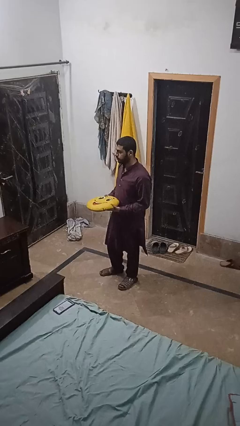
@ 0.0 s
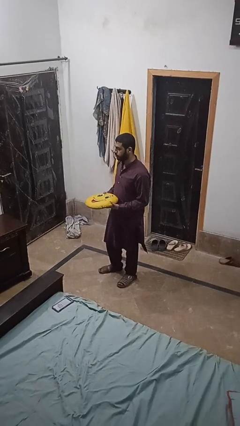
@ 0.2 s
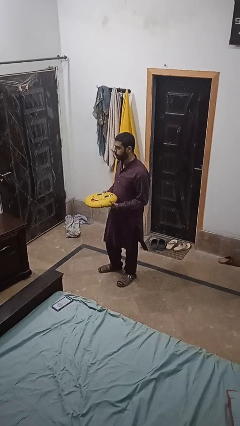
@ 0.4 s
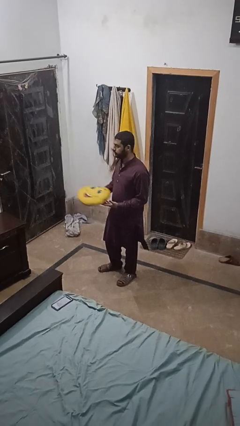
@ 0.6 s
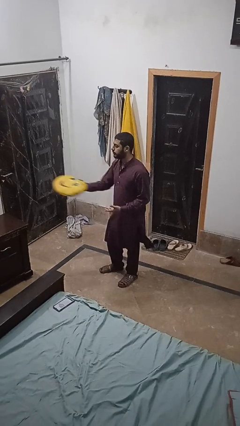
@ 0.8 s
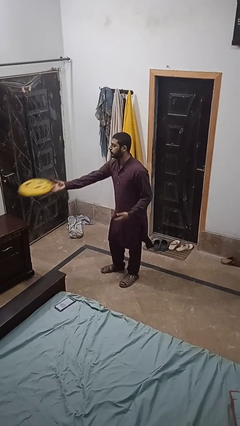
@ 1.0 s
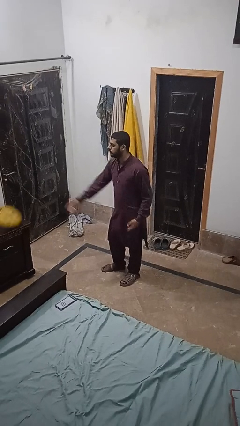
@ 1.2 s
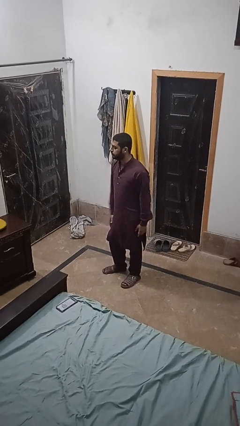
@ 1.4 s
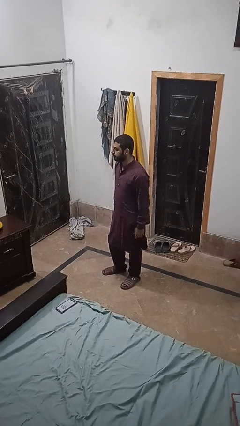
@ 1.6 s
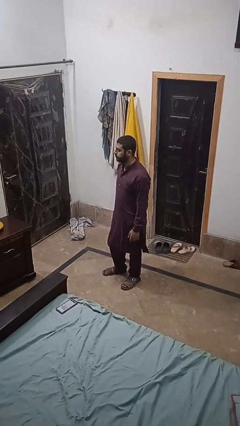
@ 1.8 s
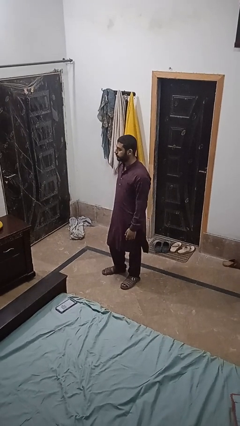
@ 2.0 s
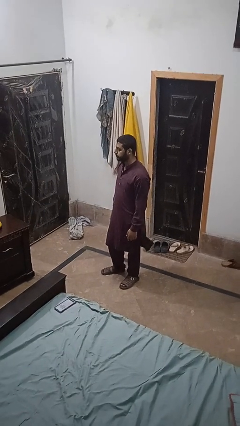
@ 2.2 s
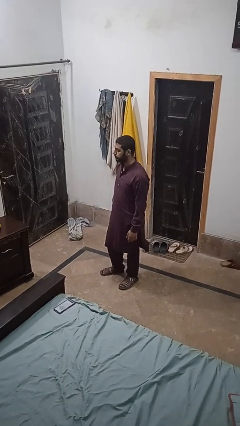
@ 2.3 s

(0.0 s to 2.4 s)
person throws object on table

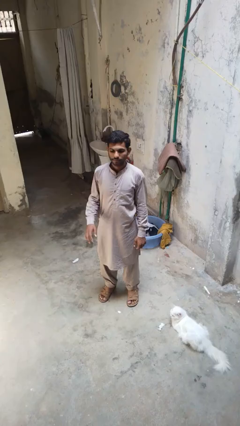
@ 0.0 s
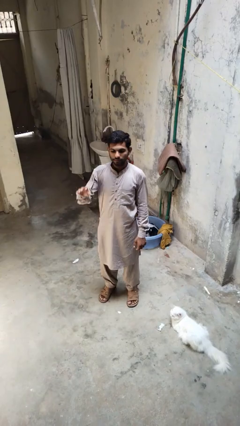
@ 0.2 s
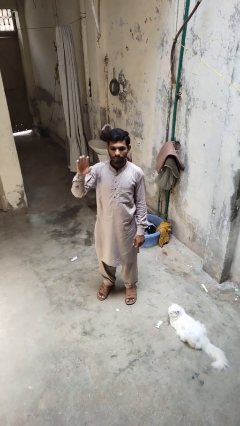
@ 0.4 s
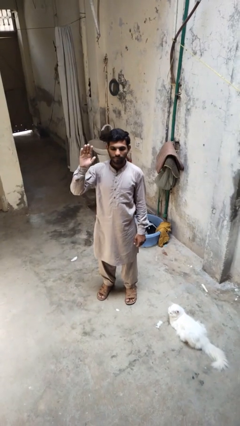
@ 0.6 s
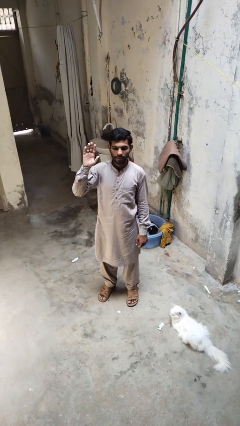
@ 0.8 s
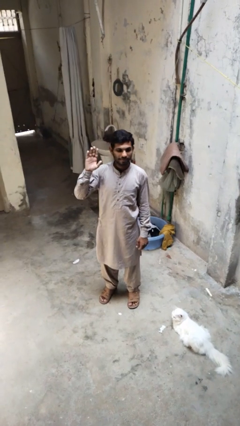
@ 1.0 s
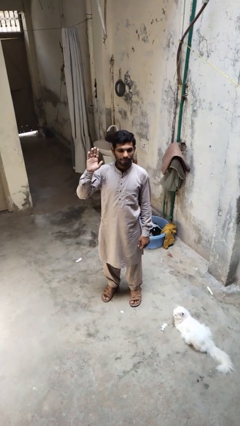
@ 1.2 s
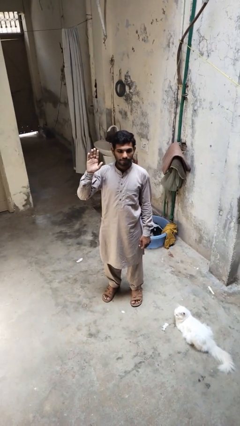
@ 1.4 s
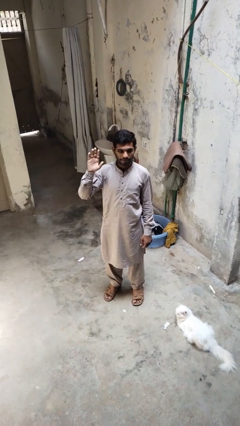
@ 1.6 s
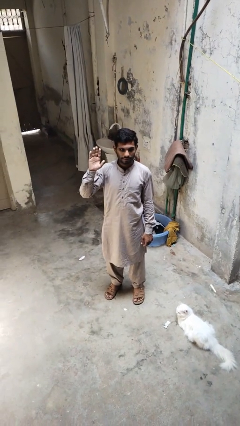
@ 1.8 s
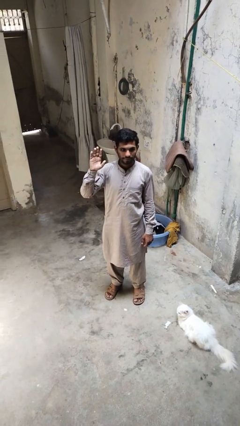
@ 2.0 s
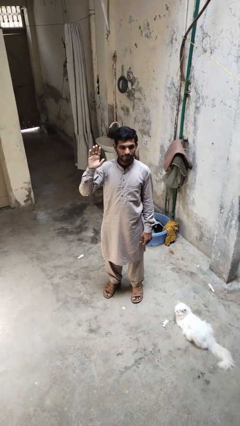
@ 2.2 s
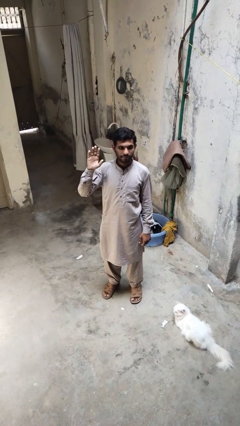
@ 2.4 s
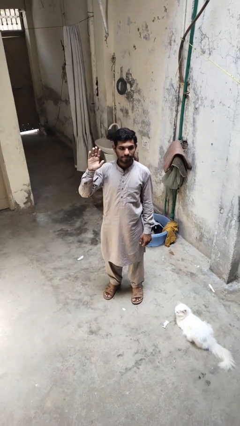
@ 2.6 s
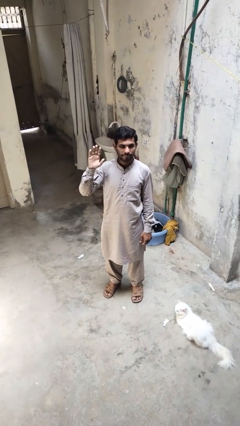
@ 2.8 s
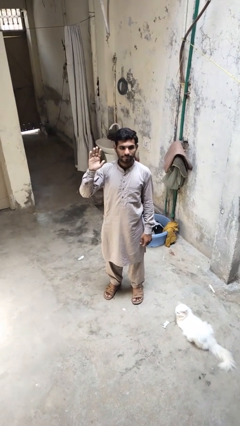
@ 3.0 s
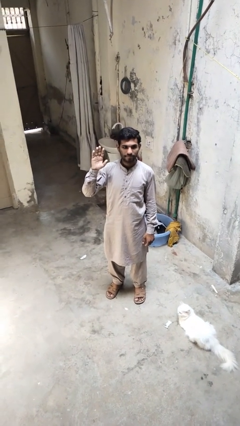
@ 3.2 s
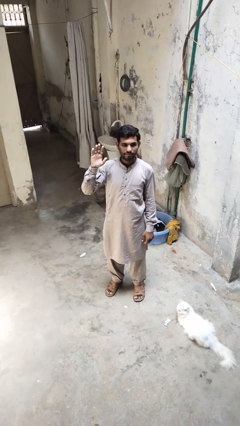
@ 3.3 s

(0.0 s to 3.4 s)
person gestures raise hand

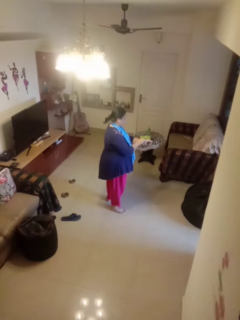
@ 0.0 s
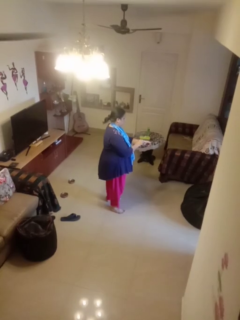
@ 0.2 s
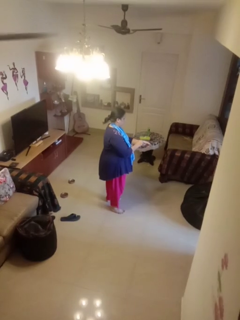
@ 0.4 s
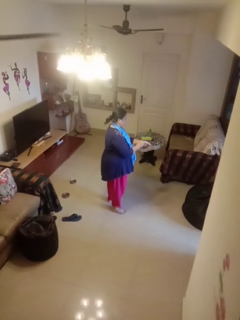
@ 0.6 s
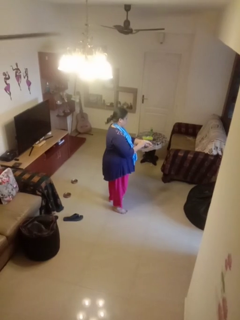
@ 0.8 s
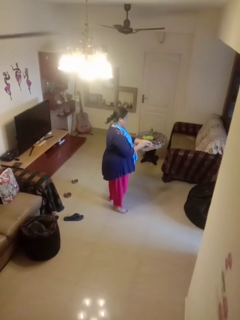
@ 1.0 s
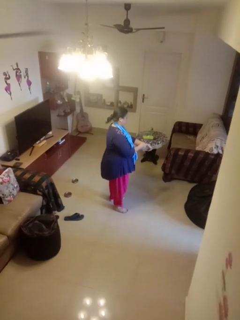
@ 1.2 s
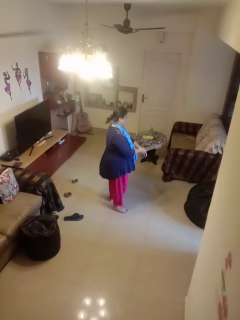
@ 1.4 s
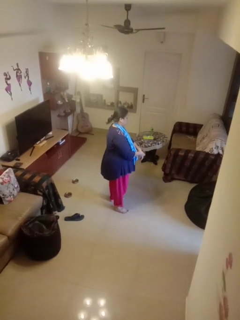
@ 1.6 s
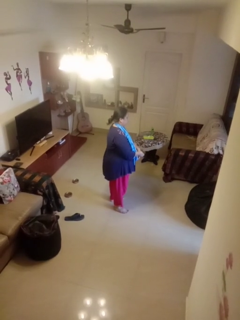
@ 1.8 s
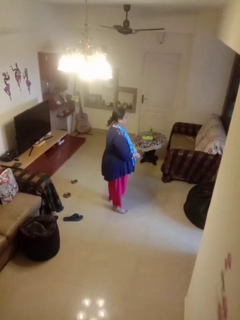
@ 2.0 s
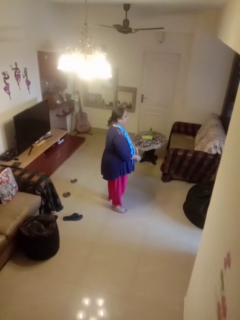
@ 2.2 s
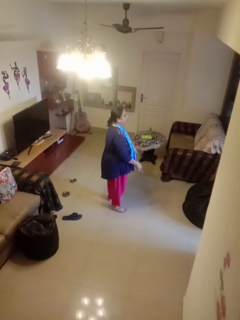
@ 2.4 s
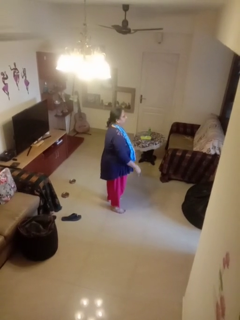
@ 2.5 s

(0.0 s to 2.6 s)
person takes off wristwatch

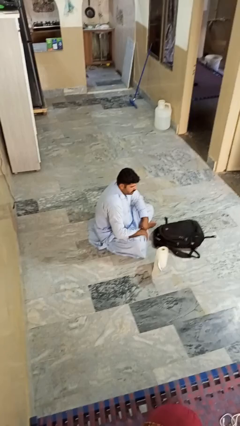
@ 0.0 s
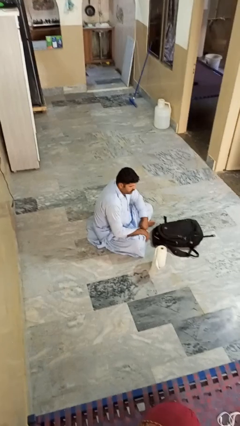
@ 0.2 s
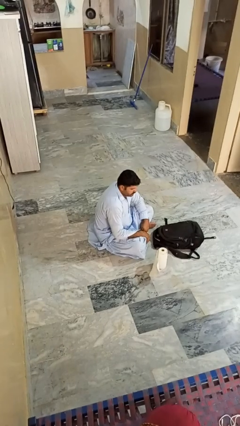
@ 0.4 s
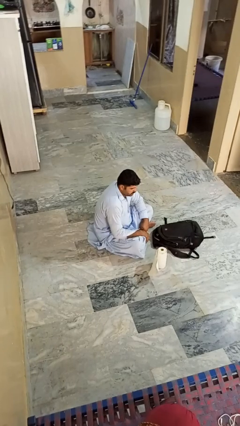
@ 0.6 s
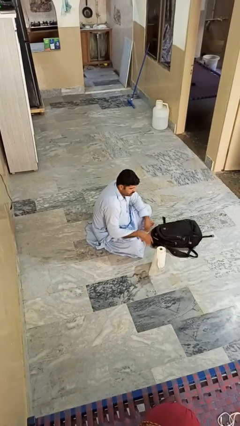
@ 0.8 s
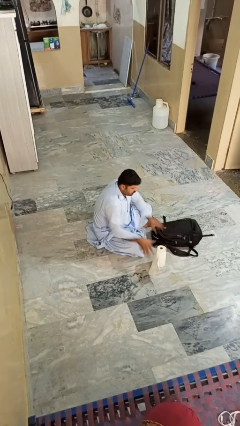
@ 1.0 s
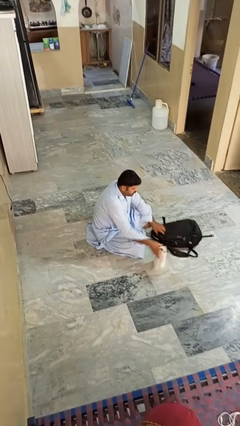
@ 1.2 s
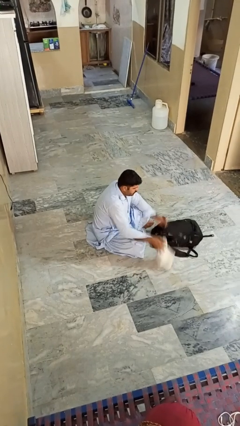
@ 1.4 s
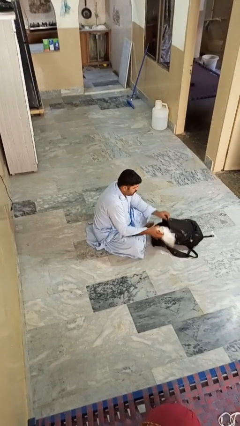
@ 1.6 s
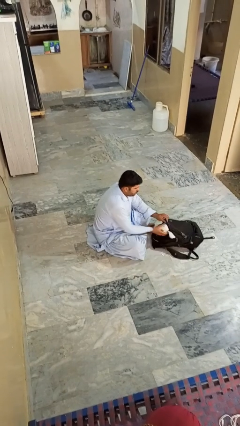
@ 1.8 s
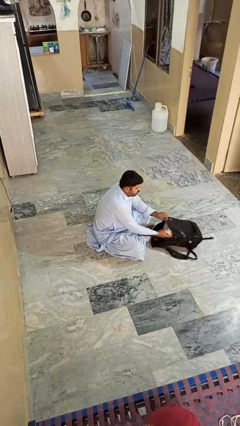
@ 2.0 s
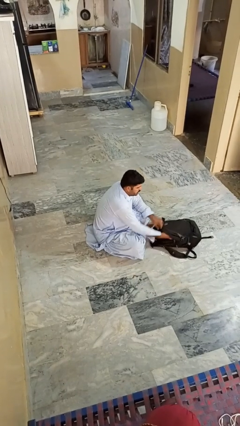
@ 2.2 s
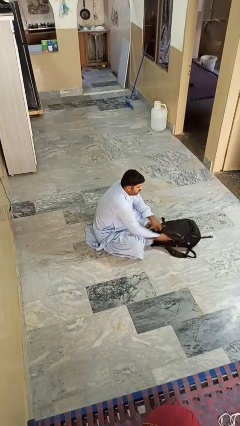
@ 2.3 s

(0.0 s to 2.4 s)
person puts object into bag

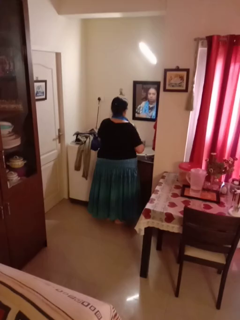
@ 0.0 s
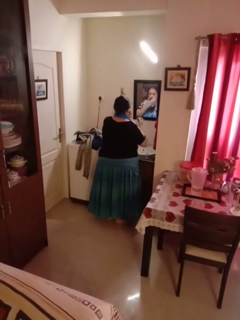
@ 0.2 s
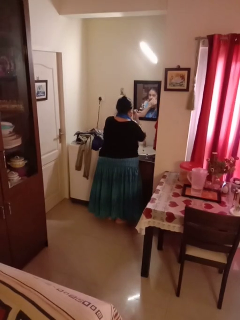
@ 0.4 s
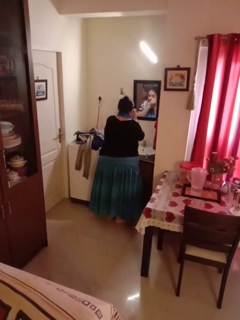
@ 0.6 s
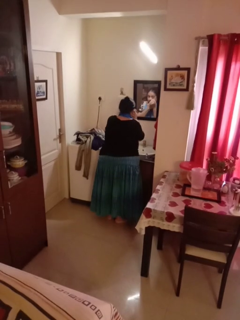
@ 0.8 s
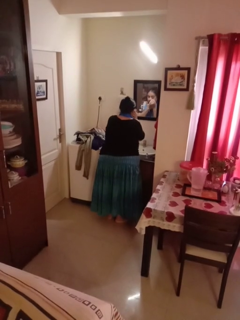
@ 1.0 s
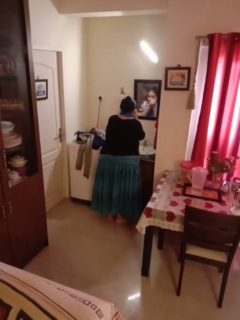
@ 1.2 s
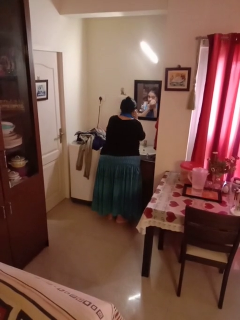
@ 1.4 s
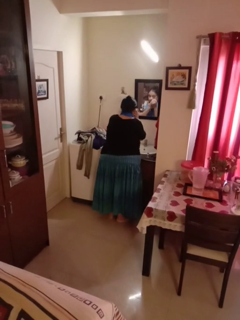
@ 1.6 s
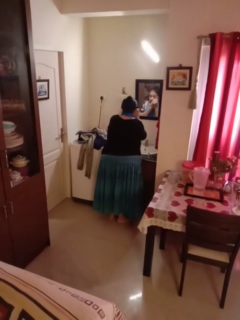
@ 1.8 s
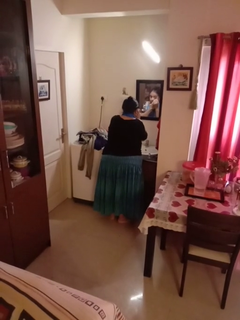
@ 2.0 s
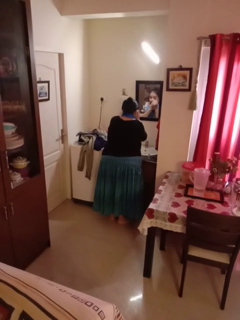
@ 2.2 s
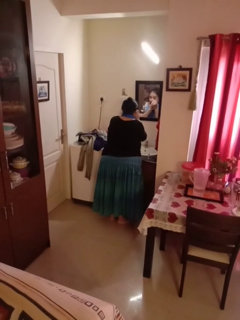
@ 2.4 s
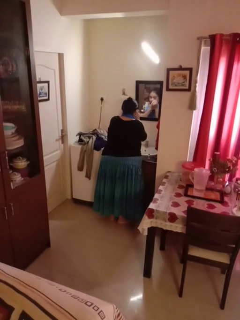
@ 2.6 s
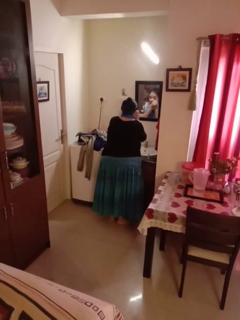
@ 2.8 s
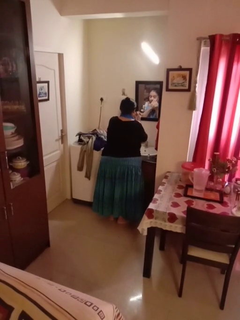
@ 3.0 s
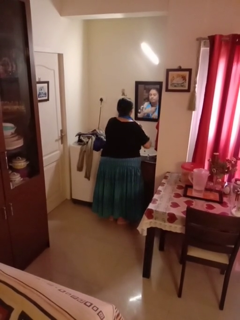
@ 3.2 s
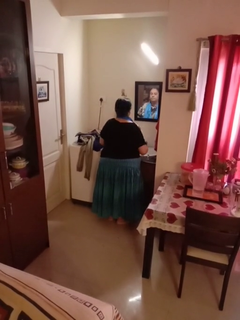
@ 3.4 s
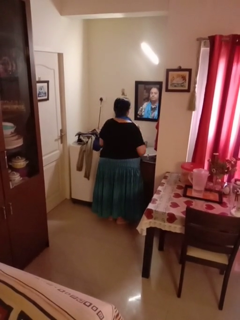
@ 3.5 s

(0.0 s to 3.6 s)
person applies eye makeup

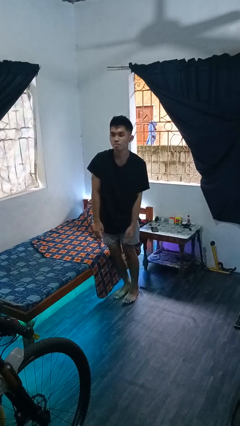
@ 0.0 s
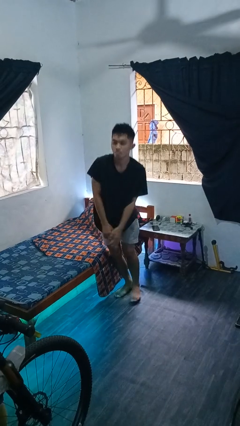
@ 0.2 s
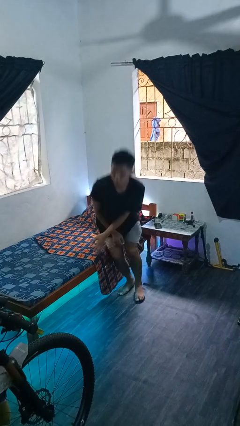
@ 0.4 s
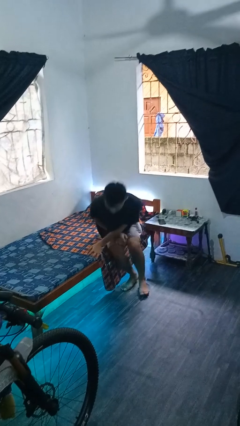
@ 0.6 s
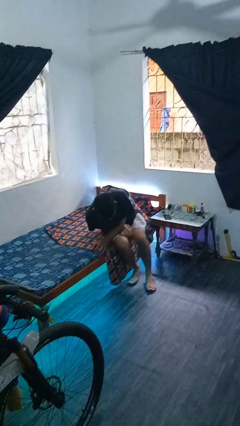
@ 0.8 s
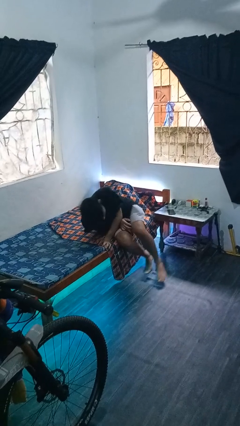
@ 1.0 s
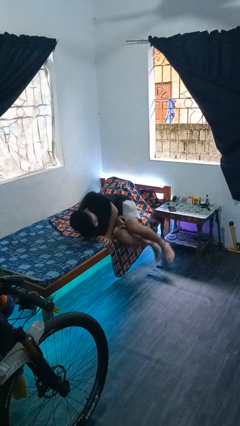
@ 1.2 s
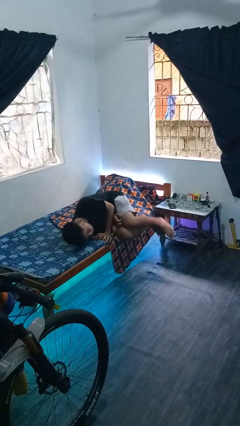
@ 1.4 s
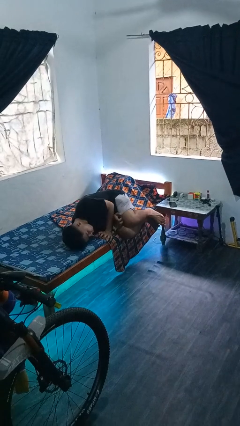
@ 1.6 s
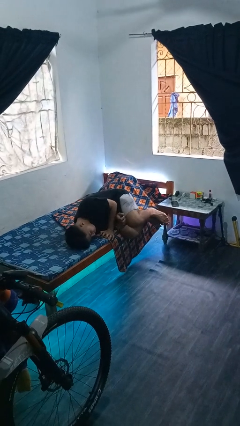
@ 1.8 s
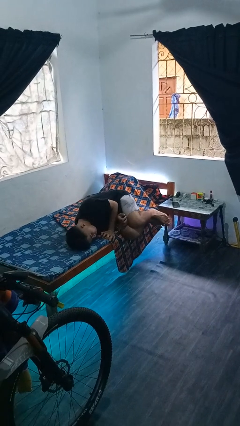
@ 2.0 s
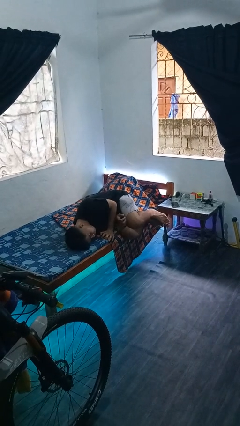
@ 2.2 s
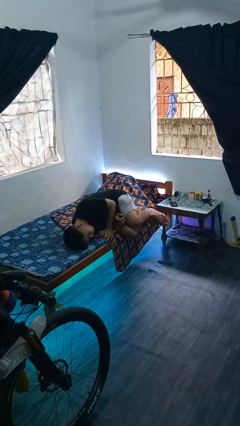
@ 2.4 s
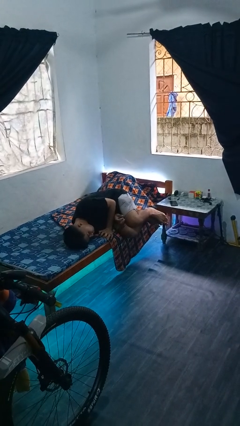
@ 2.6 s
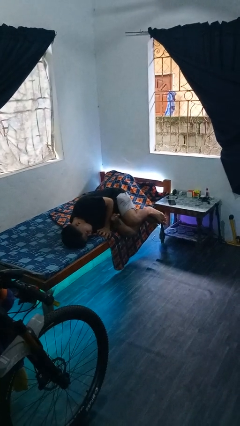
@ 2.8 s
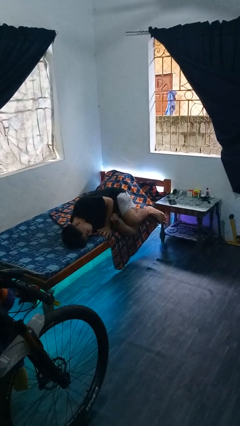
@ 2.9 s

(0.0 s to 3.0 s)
person lies down on bed

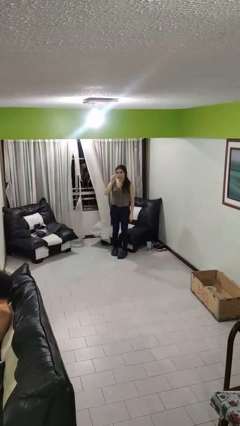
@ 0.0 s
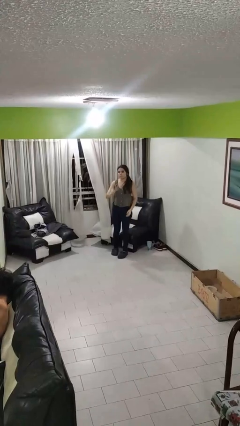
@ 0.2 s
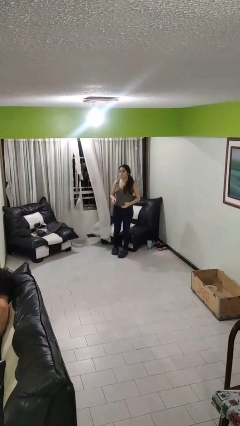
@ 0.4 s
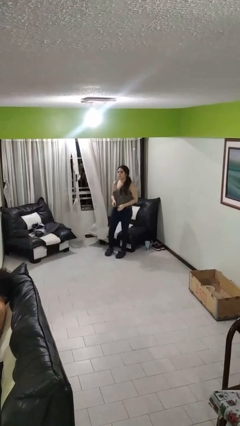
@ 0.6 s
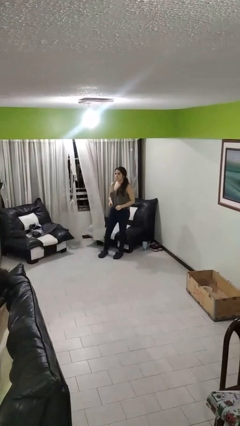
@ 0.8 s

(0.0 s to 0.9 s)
person takes off glasses

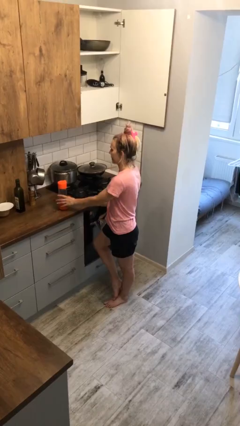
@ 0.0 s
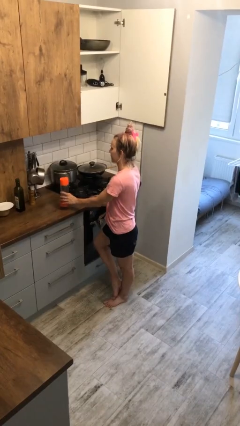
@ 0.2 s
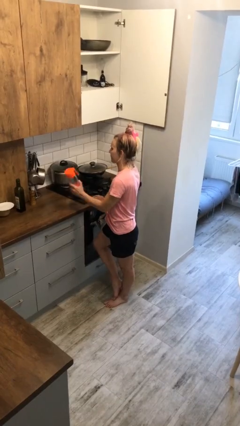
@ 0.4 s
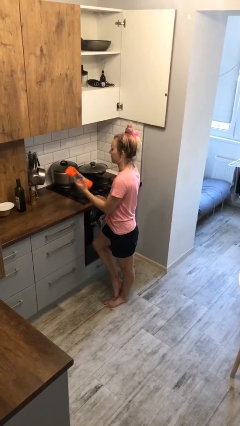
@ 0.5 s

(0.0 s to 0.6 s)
person picks up object from countertop

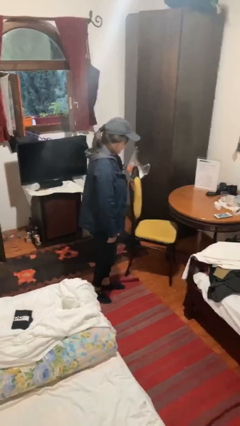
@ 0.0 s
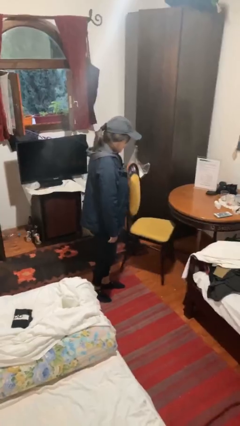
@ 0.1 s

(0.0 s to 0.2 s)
person sits down
